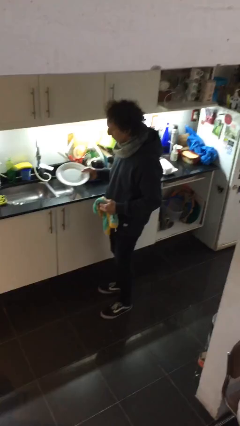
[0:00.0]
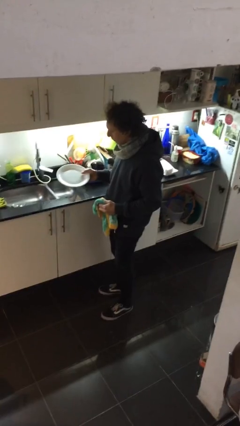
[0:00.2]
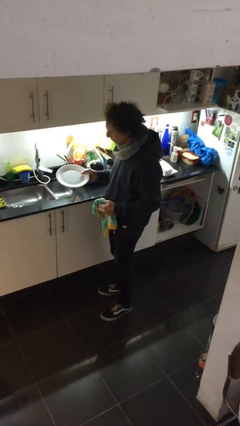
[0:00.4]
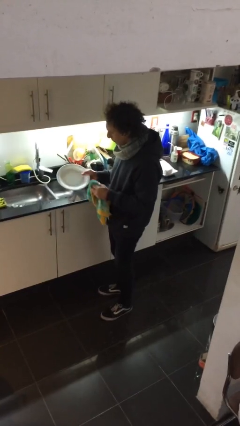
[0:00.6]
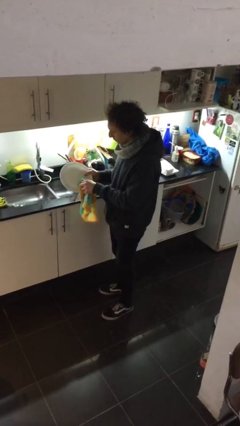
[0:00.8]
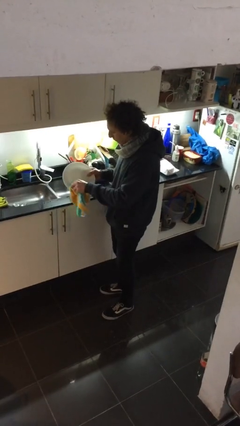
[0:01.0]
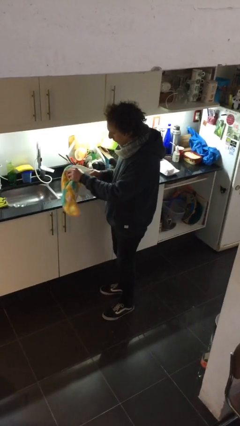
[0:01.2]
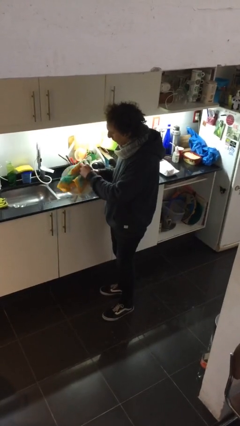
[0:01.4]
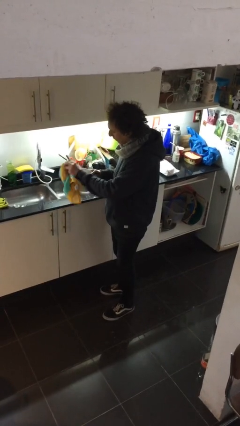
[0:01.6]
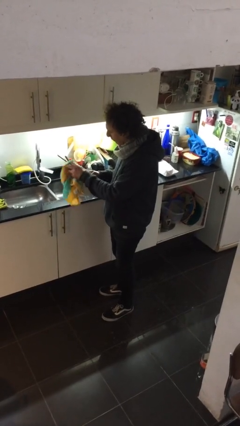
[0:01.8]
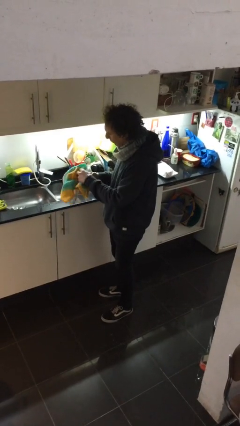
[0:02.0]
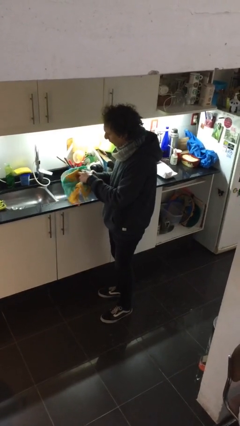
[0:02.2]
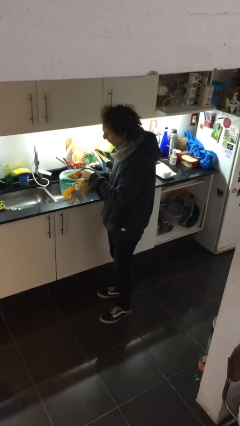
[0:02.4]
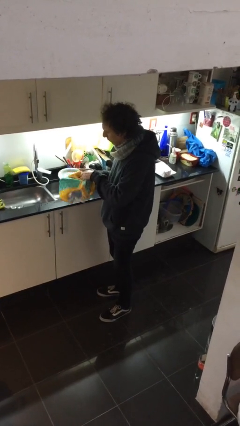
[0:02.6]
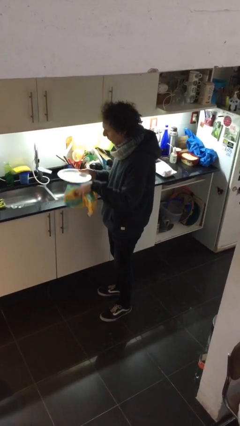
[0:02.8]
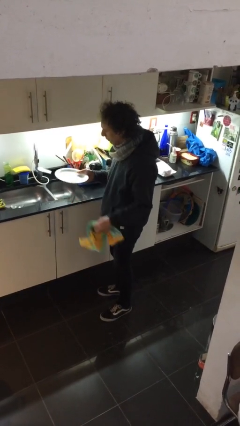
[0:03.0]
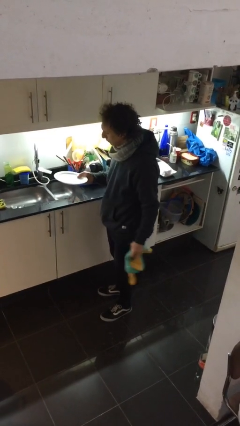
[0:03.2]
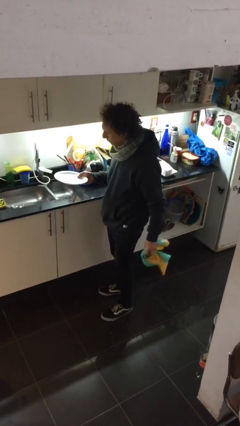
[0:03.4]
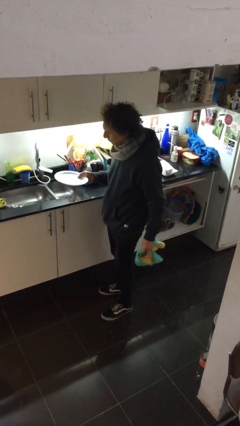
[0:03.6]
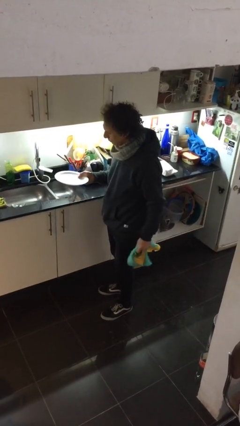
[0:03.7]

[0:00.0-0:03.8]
person dries dish

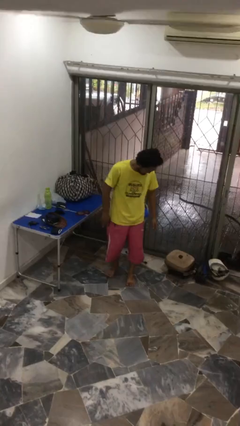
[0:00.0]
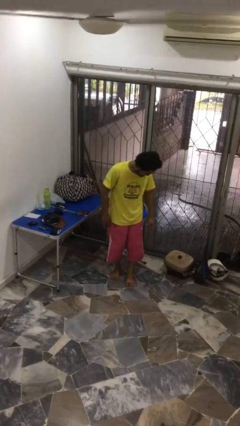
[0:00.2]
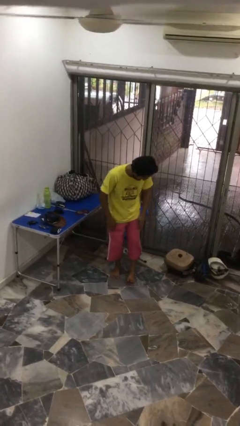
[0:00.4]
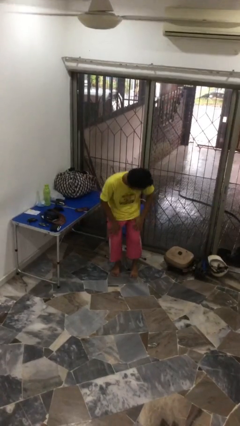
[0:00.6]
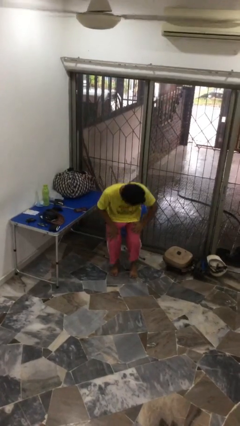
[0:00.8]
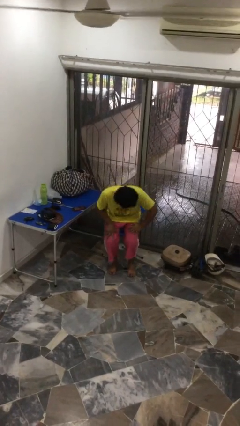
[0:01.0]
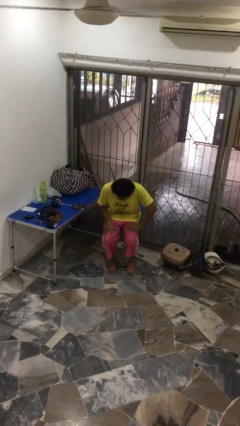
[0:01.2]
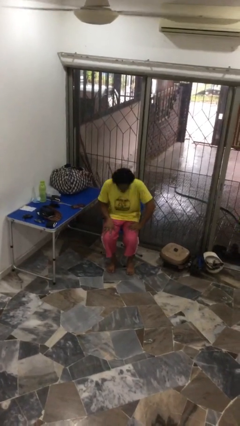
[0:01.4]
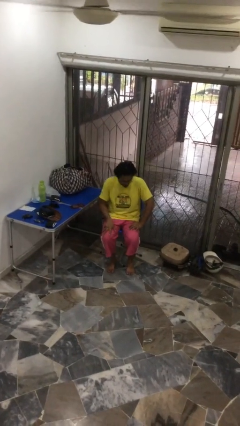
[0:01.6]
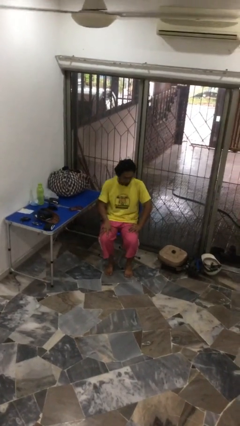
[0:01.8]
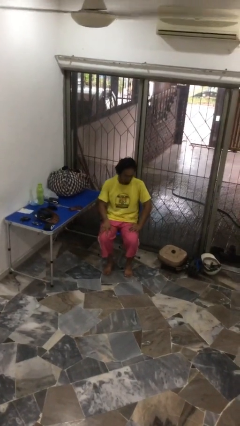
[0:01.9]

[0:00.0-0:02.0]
person sits down

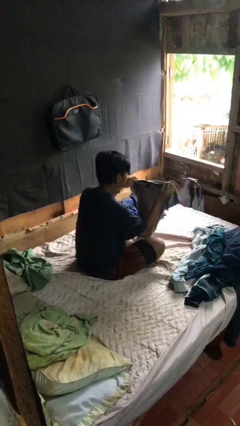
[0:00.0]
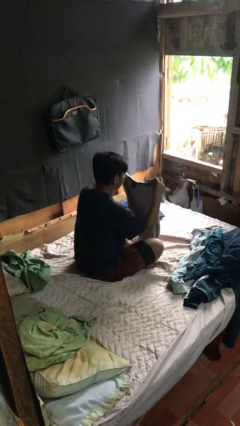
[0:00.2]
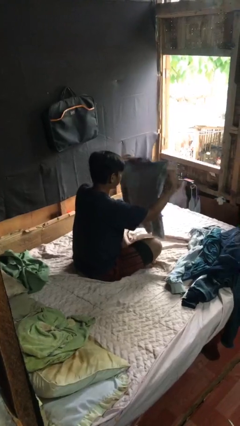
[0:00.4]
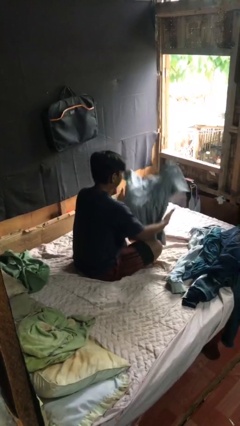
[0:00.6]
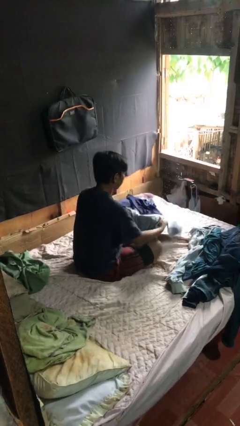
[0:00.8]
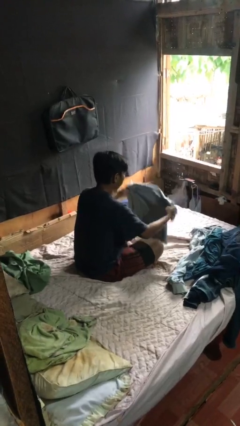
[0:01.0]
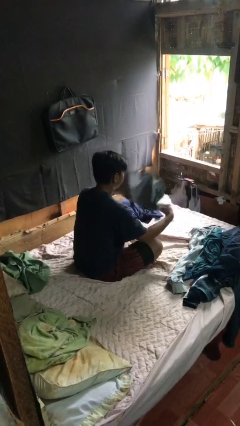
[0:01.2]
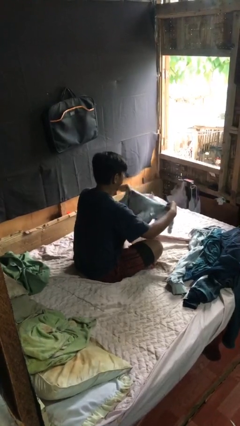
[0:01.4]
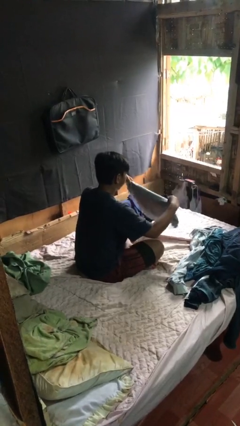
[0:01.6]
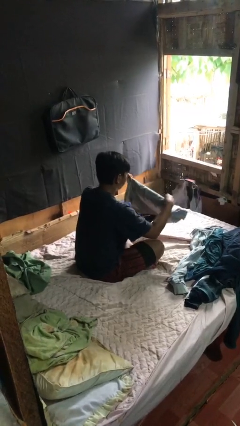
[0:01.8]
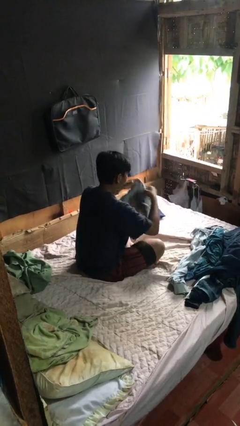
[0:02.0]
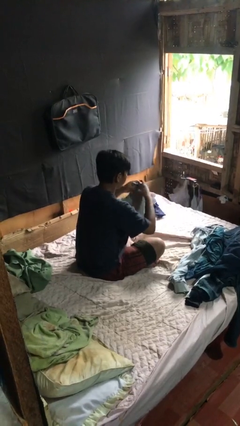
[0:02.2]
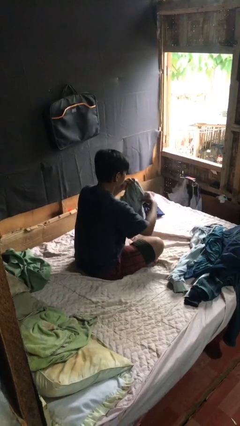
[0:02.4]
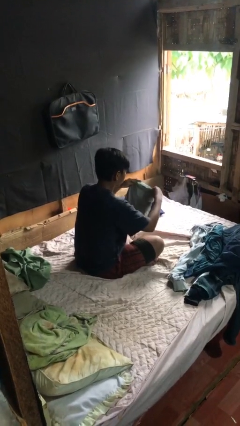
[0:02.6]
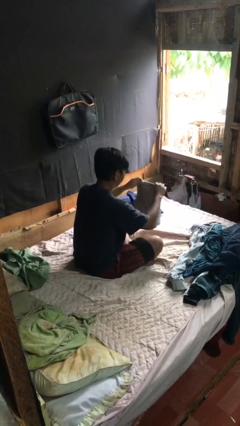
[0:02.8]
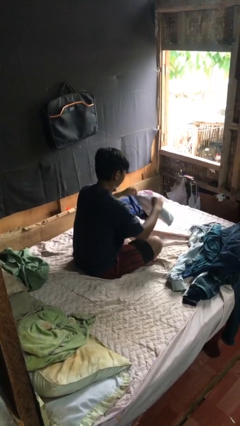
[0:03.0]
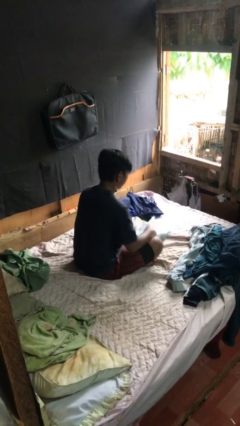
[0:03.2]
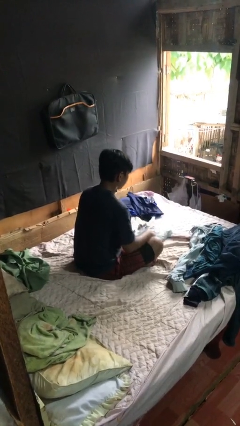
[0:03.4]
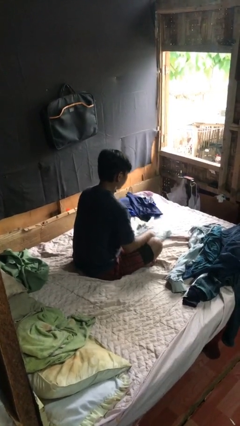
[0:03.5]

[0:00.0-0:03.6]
person folds shirt

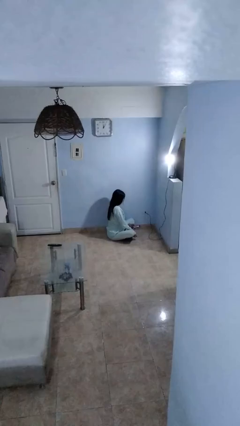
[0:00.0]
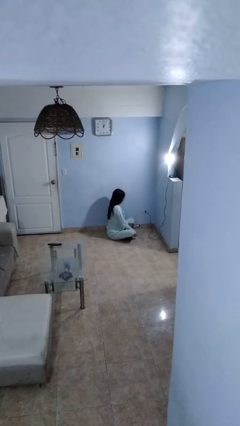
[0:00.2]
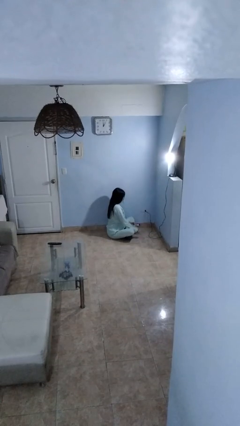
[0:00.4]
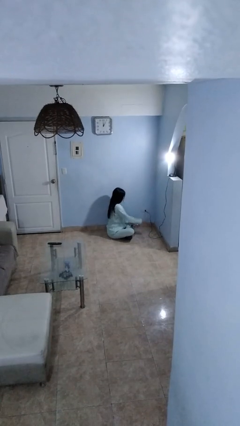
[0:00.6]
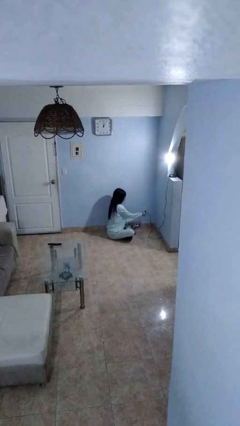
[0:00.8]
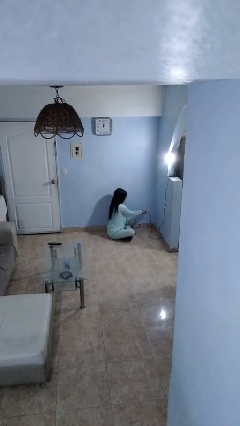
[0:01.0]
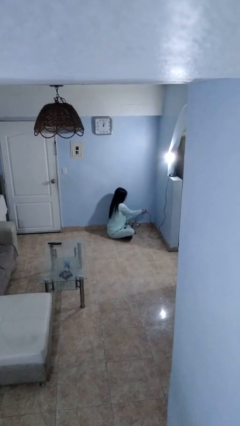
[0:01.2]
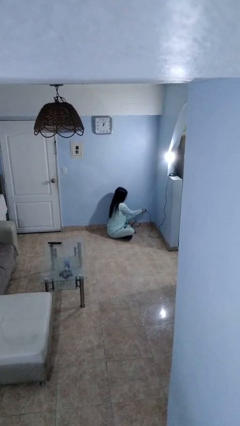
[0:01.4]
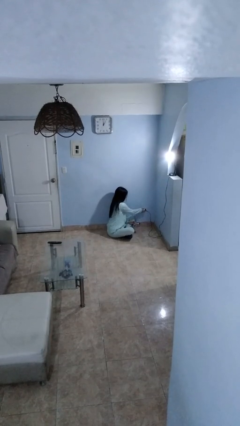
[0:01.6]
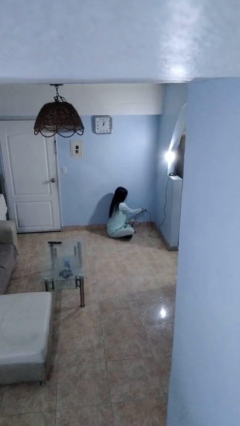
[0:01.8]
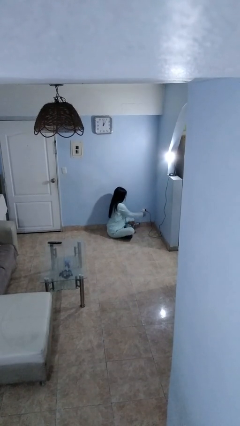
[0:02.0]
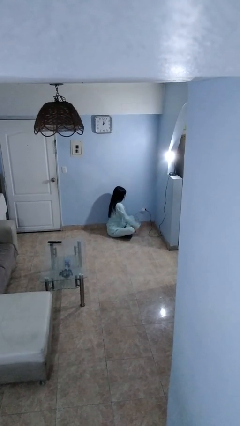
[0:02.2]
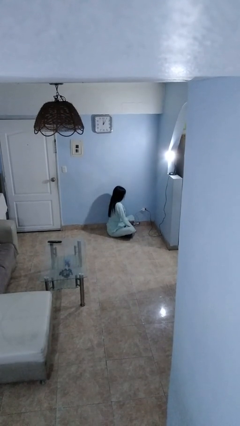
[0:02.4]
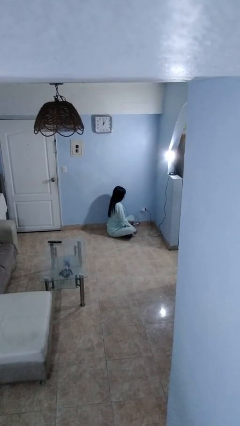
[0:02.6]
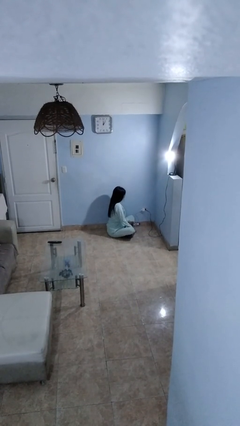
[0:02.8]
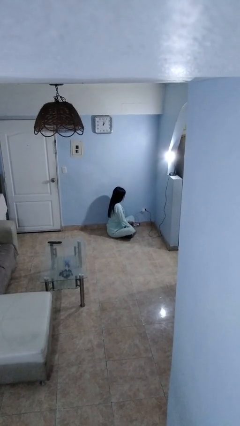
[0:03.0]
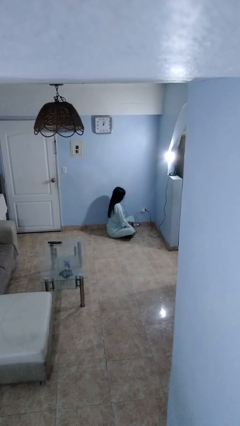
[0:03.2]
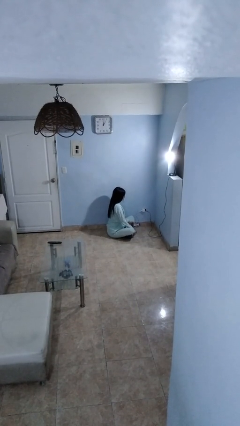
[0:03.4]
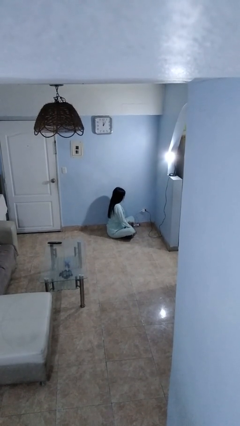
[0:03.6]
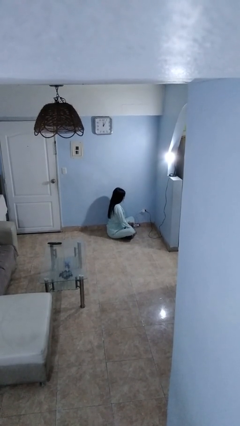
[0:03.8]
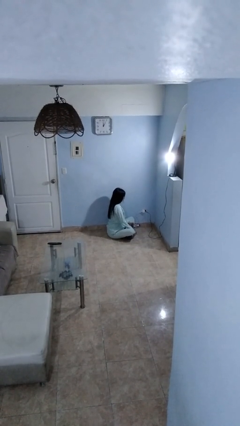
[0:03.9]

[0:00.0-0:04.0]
person plugs into electrical socket

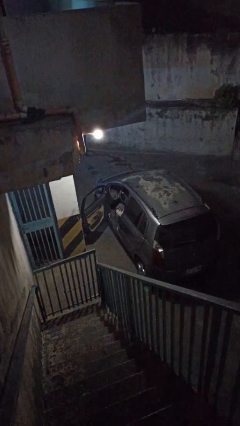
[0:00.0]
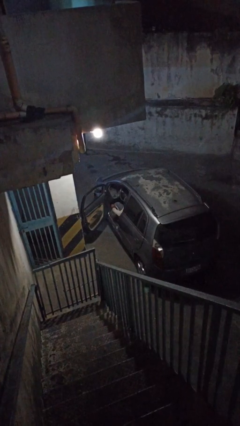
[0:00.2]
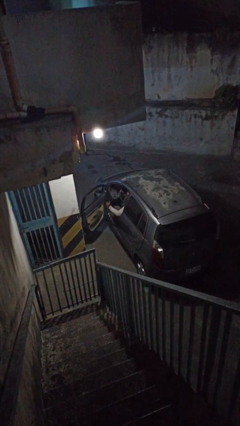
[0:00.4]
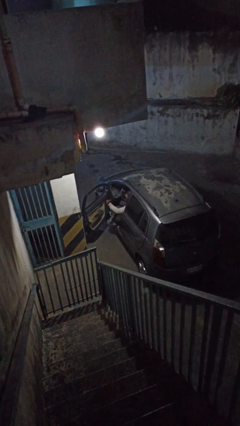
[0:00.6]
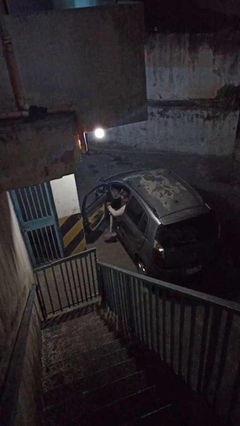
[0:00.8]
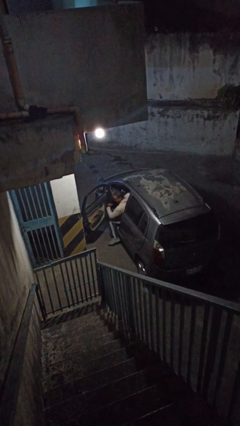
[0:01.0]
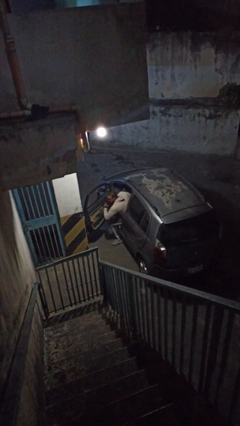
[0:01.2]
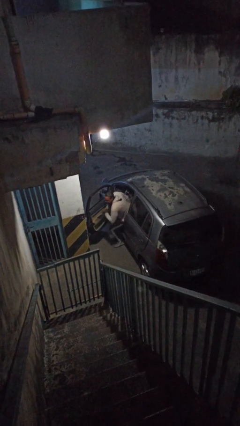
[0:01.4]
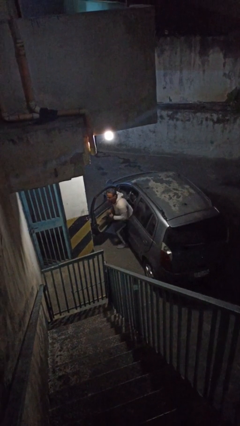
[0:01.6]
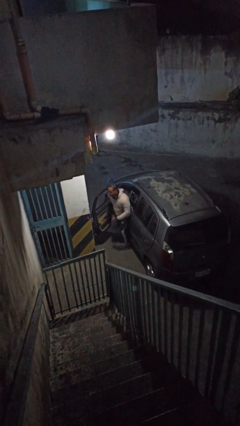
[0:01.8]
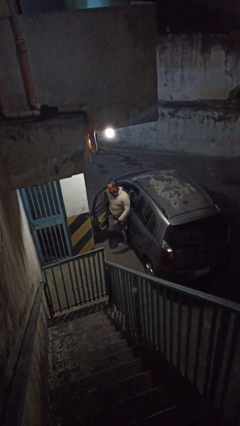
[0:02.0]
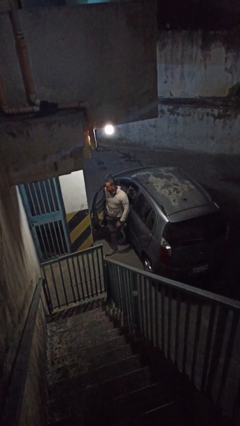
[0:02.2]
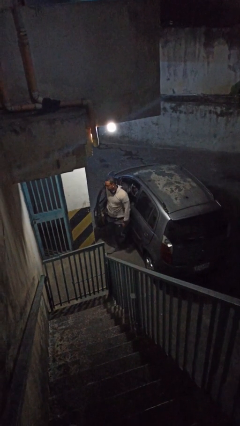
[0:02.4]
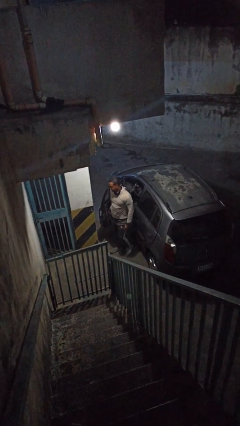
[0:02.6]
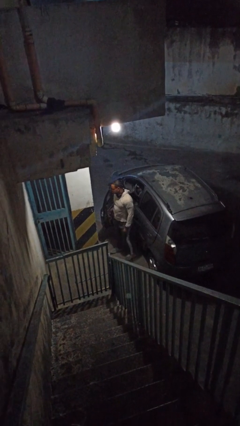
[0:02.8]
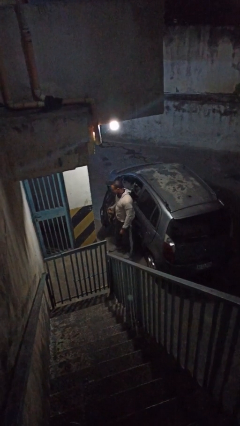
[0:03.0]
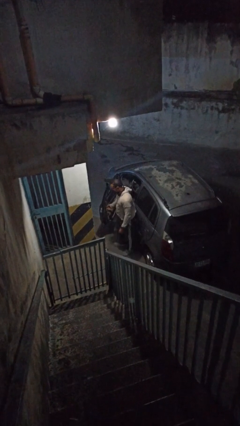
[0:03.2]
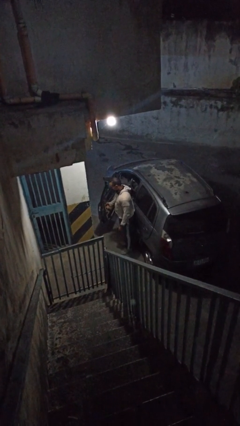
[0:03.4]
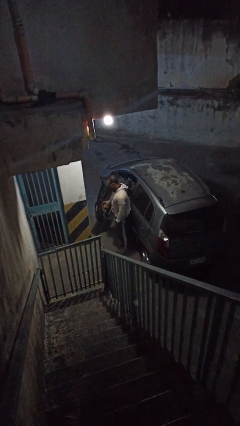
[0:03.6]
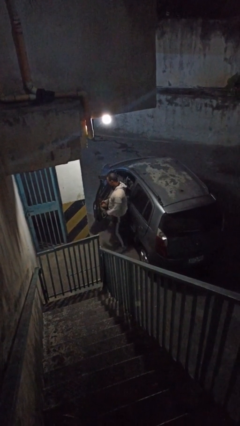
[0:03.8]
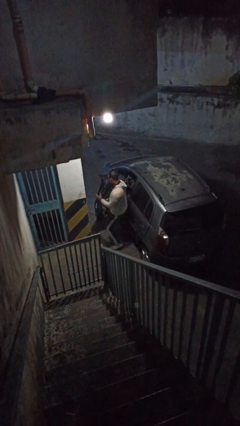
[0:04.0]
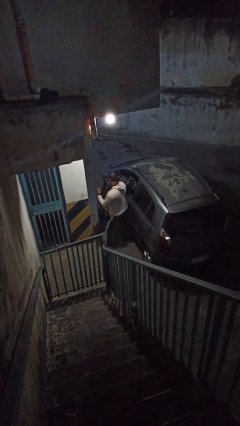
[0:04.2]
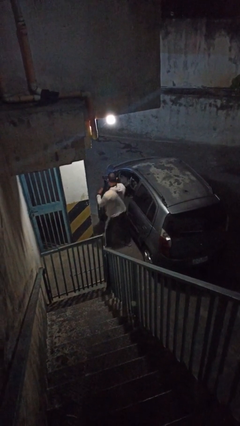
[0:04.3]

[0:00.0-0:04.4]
person exits car
